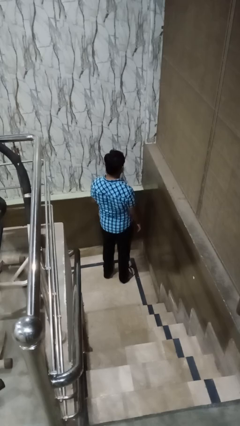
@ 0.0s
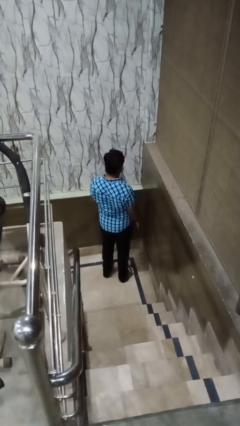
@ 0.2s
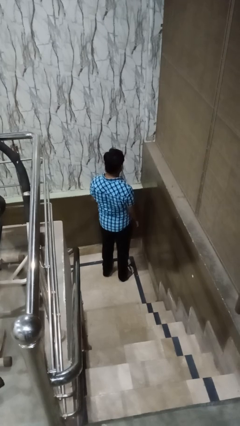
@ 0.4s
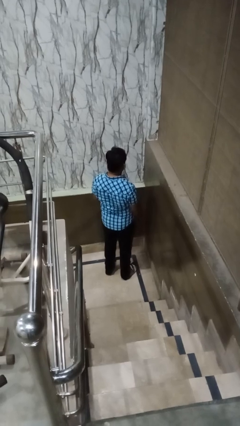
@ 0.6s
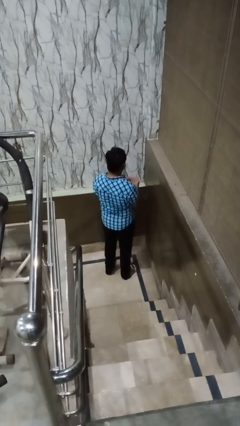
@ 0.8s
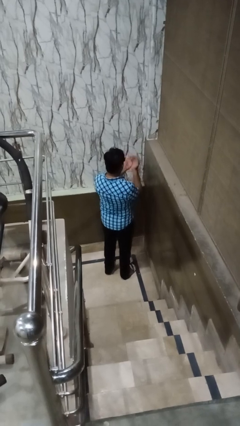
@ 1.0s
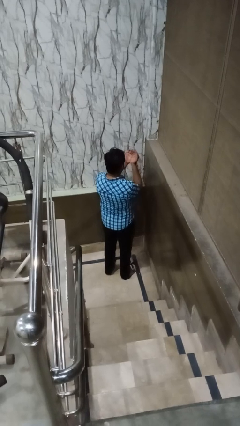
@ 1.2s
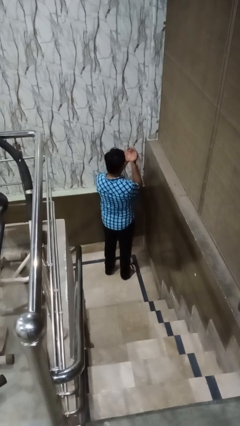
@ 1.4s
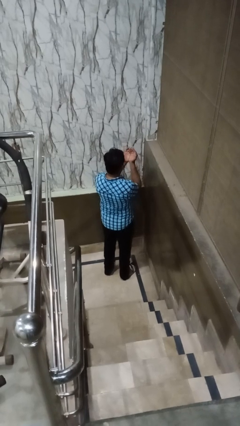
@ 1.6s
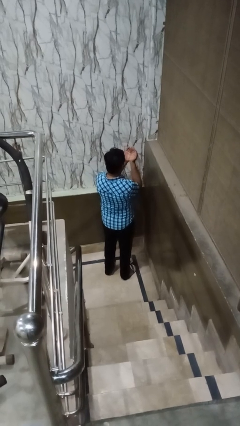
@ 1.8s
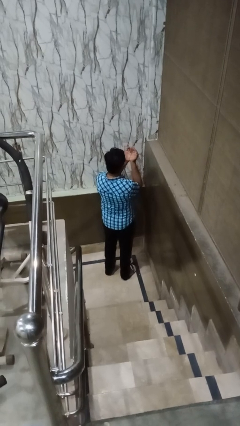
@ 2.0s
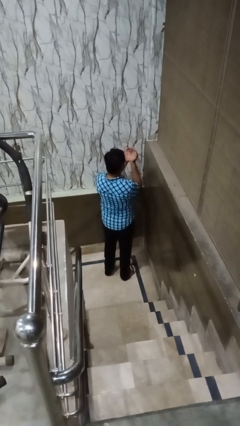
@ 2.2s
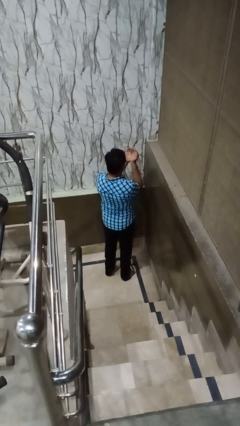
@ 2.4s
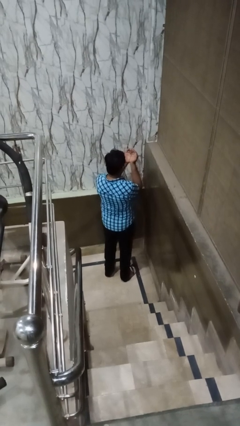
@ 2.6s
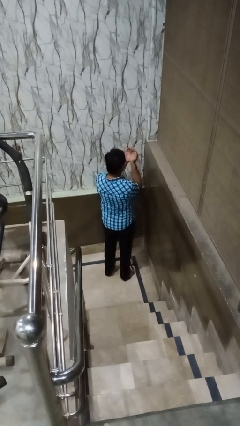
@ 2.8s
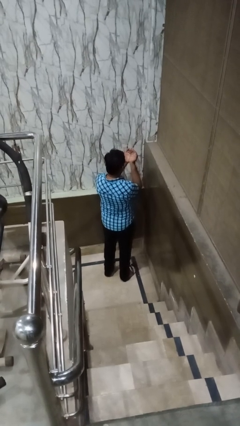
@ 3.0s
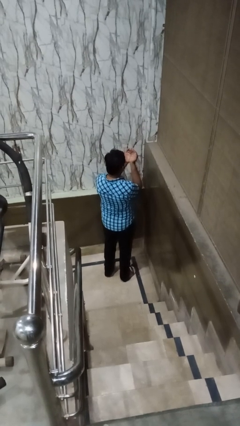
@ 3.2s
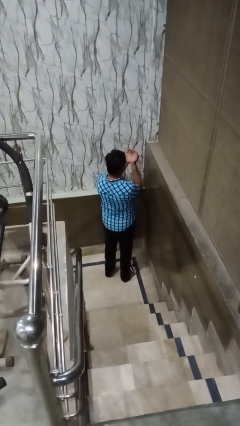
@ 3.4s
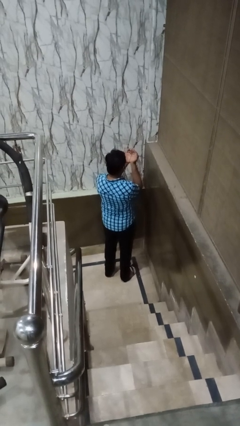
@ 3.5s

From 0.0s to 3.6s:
person prays

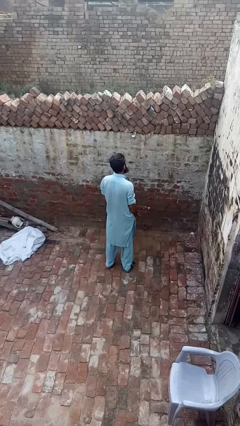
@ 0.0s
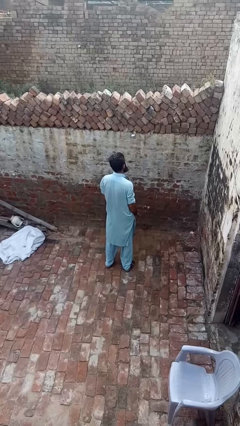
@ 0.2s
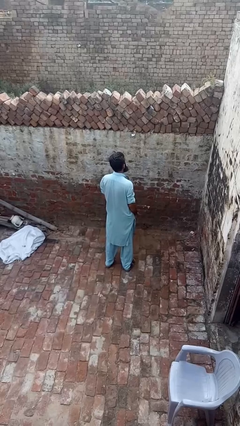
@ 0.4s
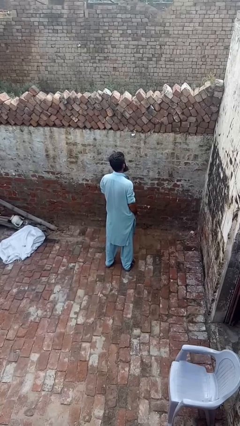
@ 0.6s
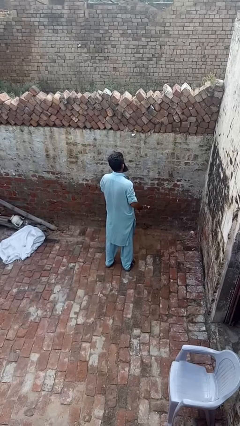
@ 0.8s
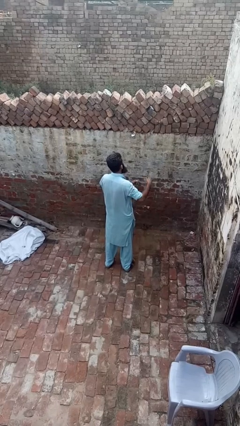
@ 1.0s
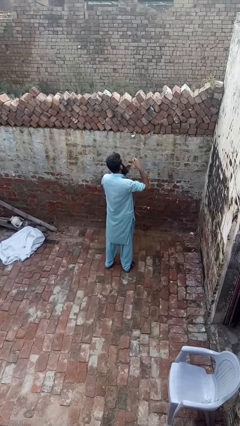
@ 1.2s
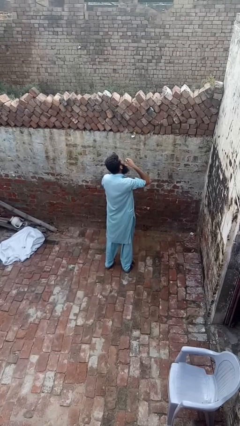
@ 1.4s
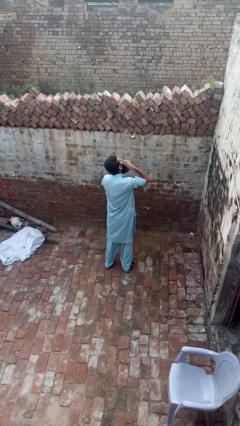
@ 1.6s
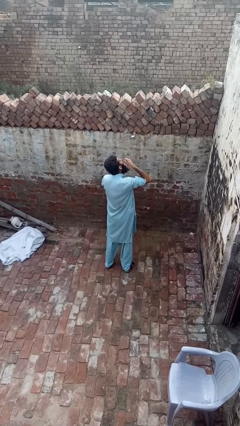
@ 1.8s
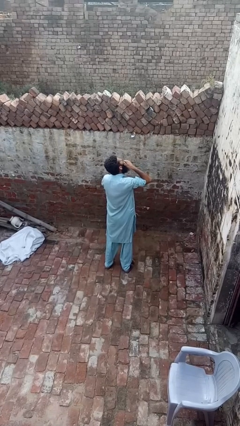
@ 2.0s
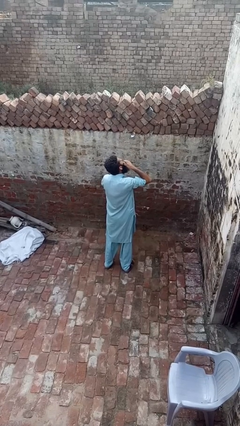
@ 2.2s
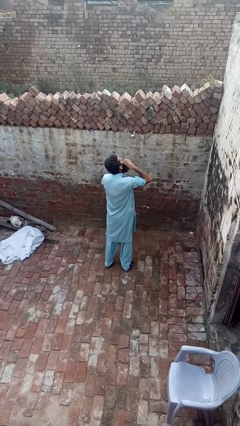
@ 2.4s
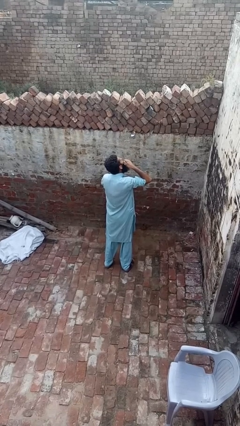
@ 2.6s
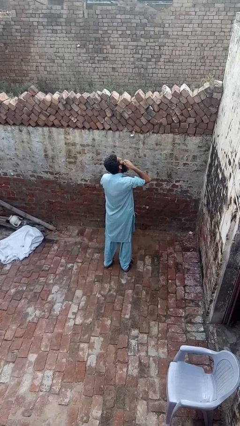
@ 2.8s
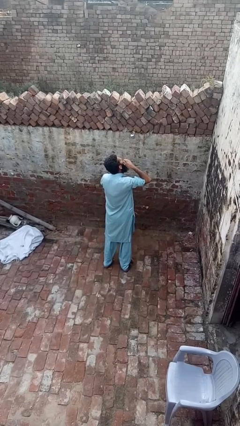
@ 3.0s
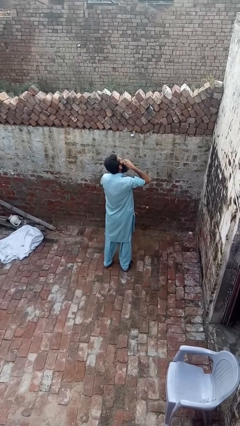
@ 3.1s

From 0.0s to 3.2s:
person flosses

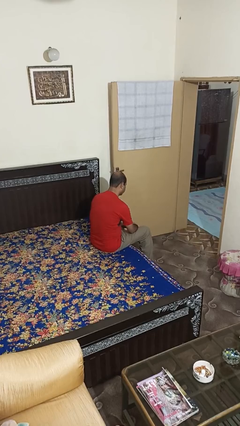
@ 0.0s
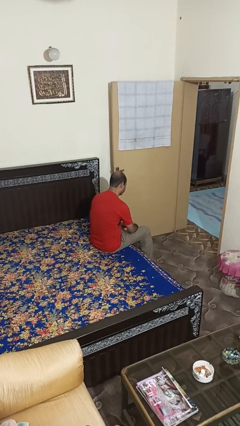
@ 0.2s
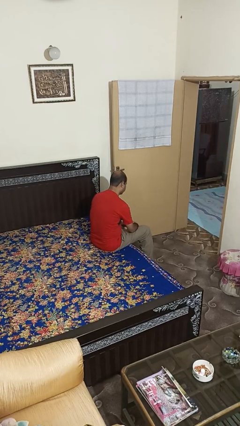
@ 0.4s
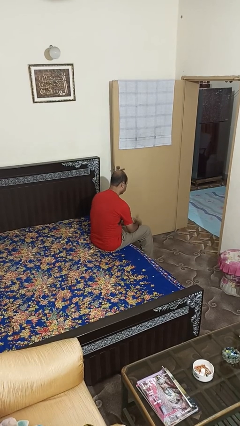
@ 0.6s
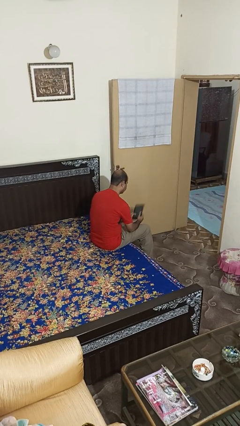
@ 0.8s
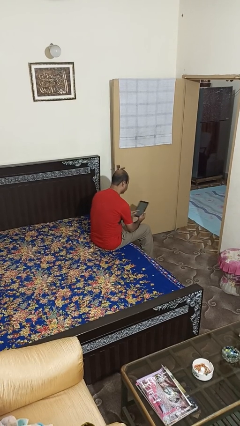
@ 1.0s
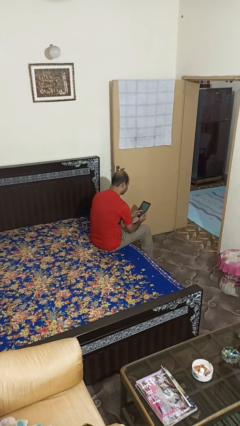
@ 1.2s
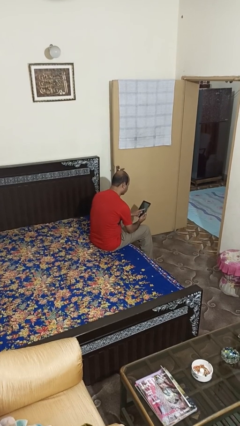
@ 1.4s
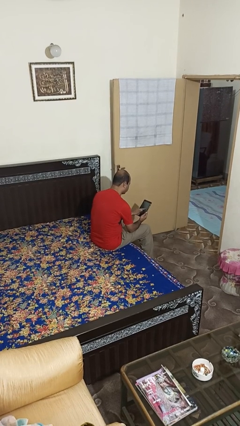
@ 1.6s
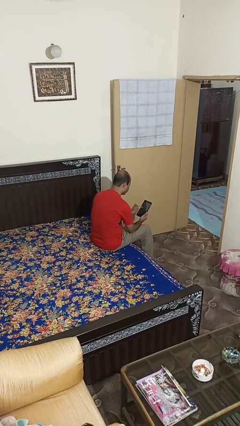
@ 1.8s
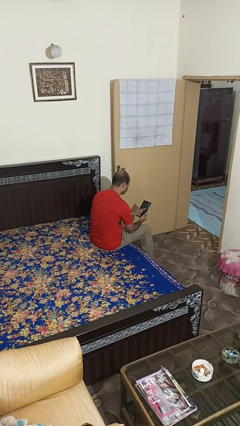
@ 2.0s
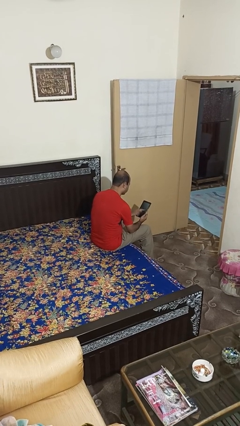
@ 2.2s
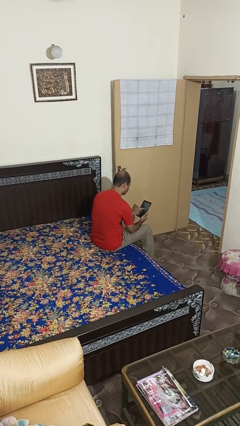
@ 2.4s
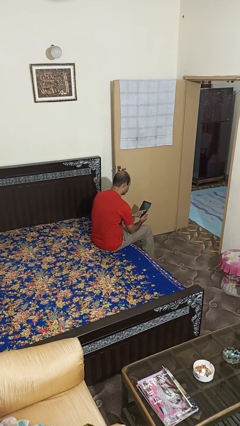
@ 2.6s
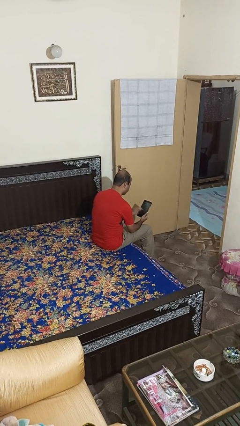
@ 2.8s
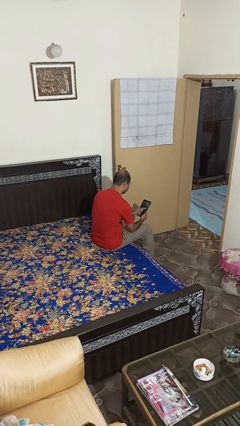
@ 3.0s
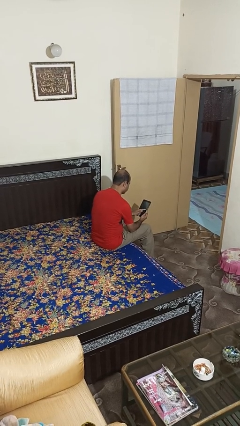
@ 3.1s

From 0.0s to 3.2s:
person interacts with tablet

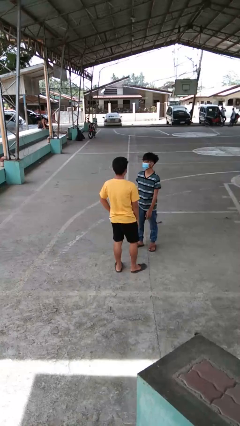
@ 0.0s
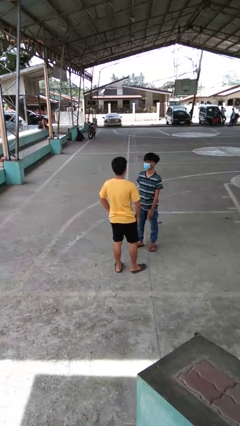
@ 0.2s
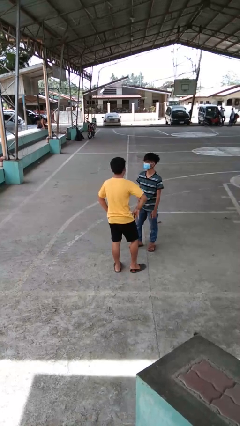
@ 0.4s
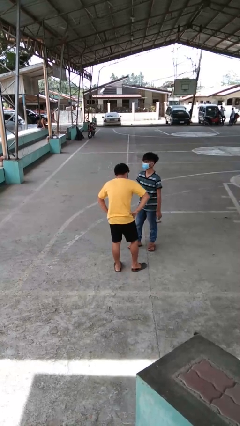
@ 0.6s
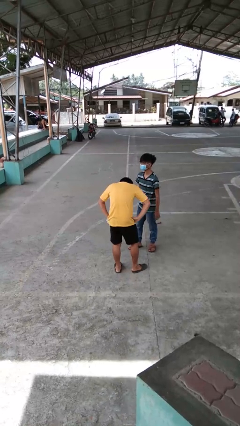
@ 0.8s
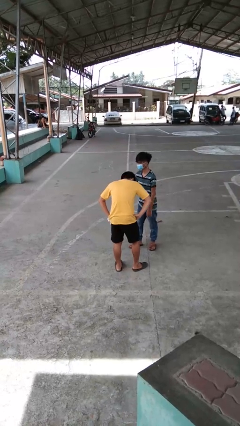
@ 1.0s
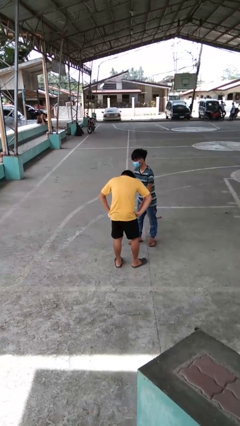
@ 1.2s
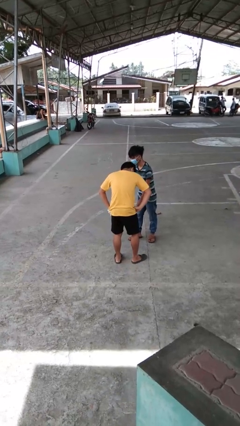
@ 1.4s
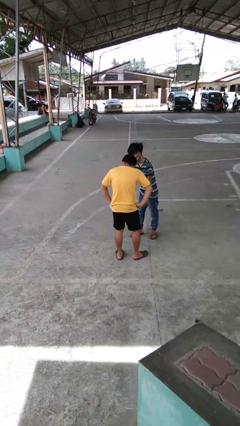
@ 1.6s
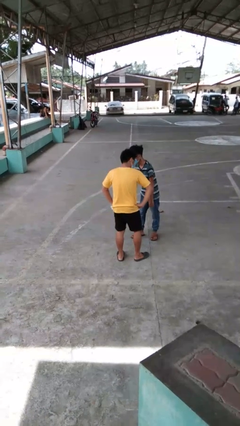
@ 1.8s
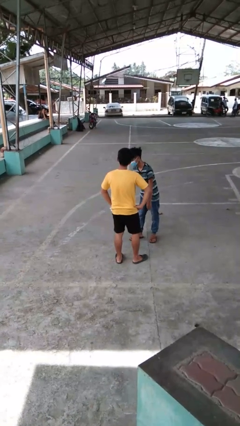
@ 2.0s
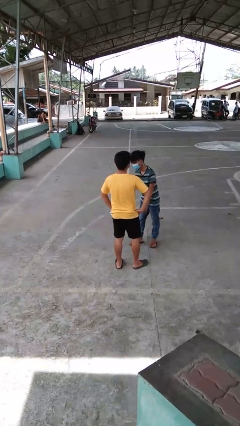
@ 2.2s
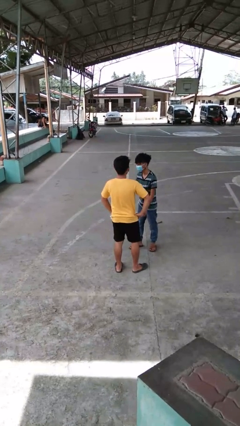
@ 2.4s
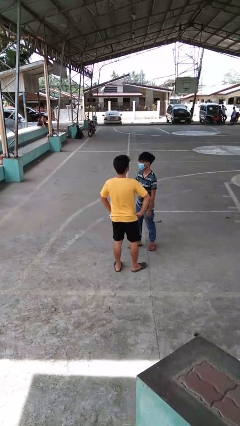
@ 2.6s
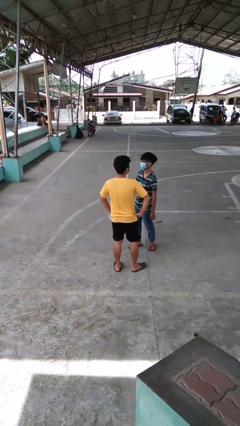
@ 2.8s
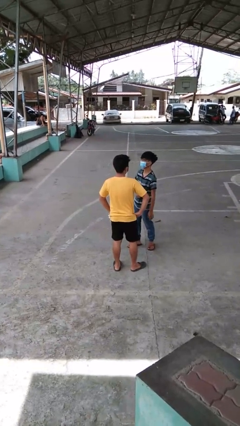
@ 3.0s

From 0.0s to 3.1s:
person laughs with person

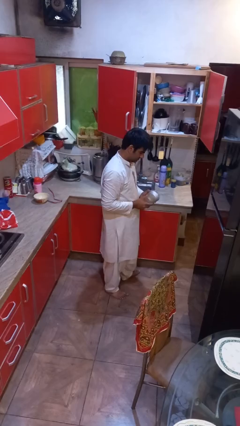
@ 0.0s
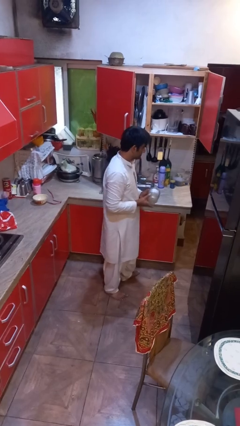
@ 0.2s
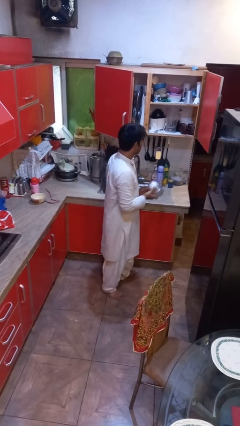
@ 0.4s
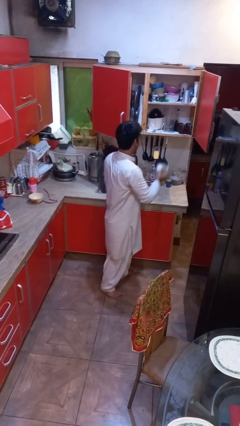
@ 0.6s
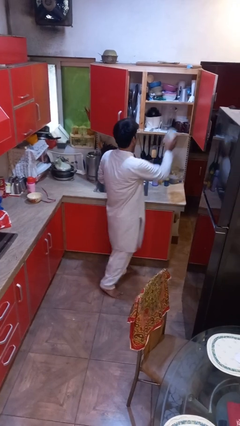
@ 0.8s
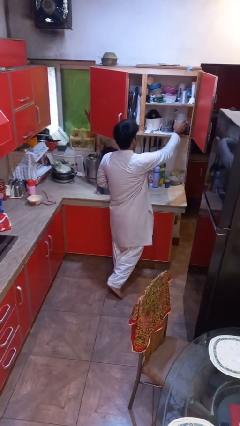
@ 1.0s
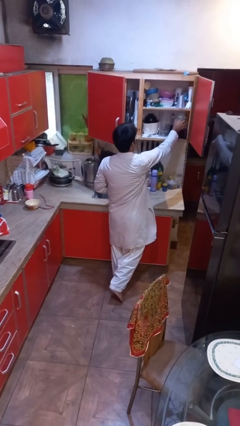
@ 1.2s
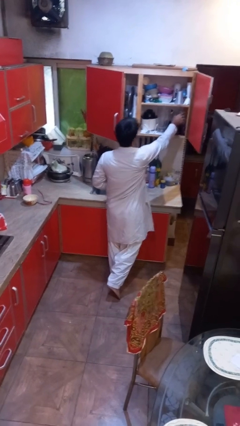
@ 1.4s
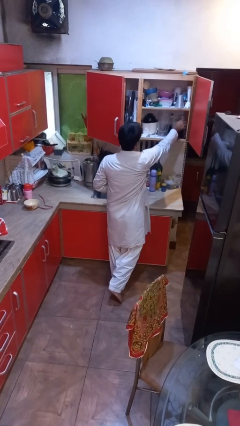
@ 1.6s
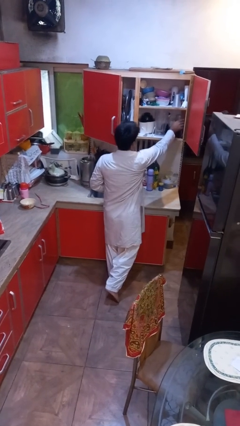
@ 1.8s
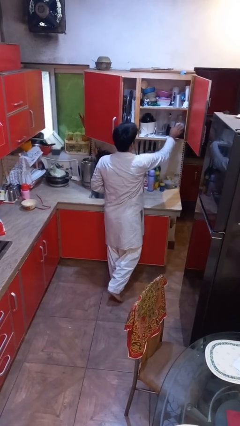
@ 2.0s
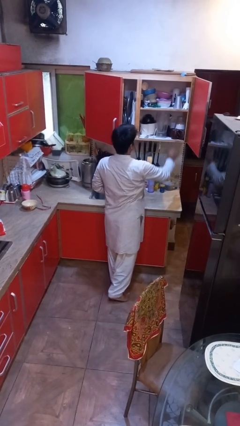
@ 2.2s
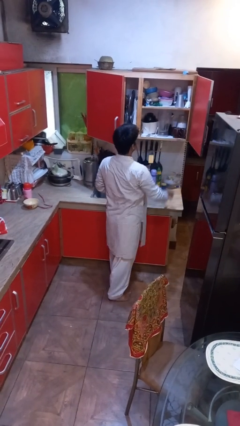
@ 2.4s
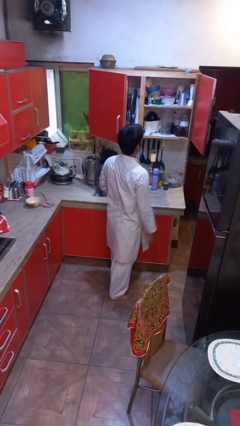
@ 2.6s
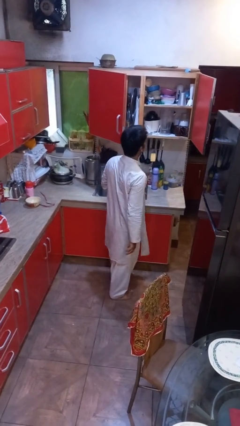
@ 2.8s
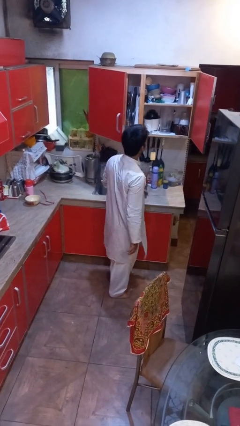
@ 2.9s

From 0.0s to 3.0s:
person puts down object into cabinet

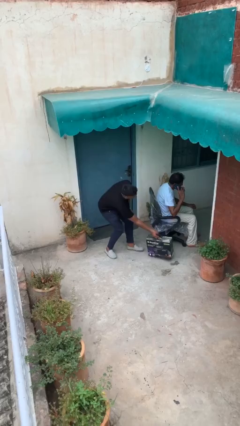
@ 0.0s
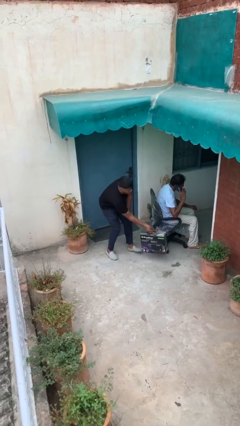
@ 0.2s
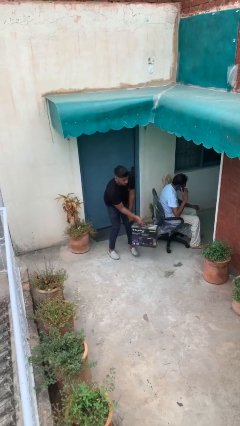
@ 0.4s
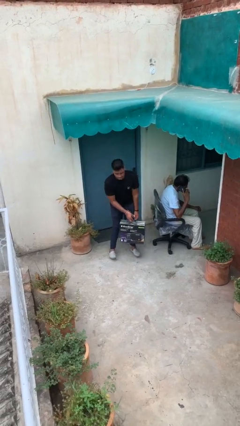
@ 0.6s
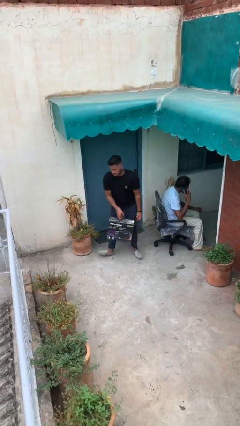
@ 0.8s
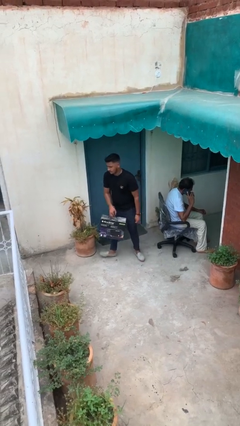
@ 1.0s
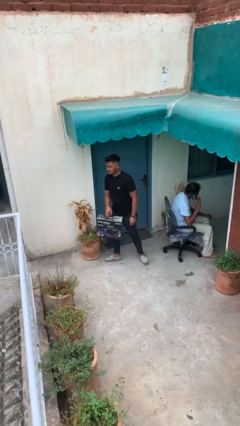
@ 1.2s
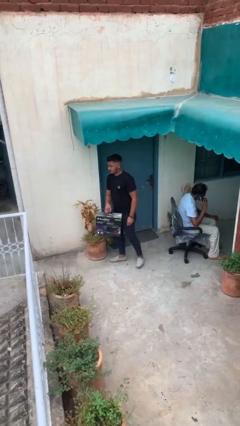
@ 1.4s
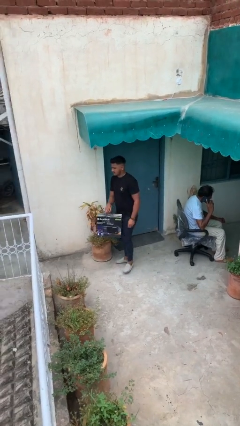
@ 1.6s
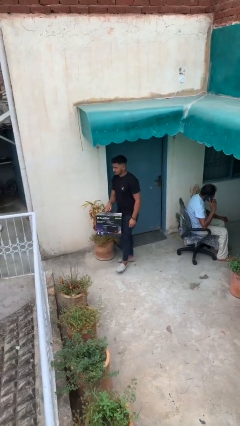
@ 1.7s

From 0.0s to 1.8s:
person steals object from person
